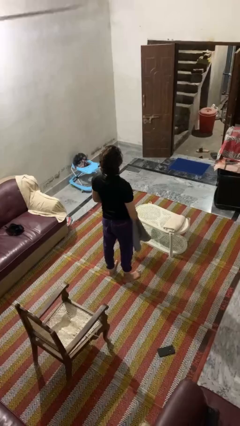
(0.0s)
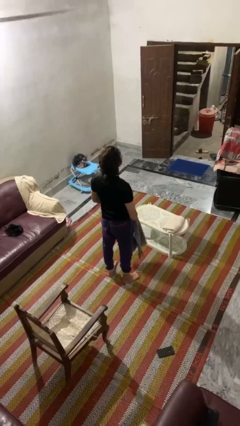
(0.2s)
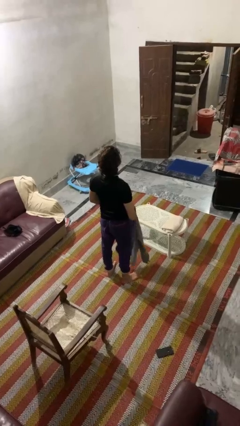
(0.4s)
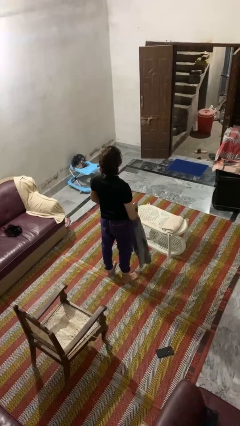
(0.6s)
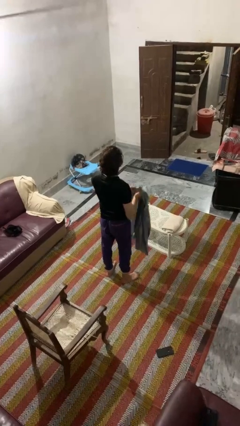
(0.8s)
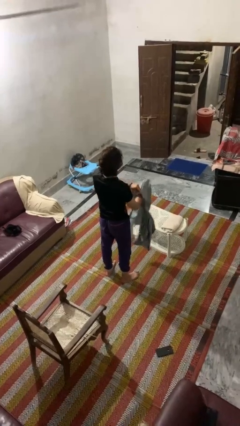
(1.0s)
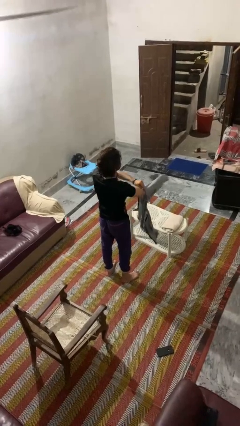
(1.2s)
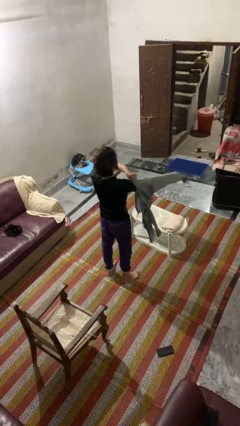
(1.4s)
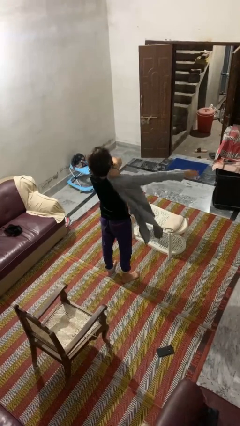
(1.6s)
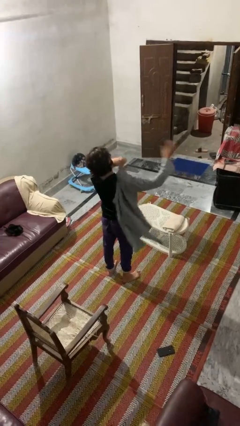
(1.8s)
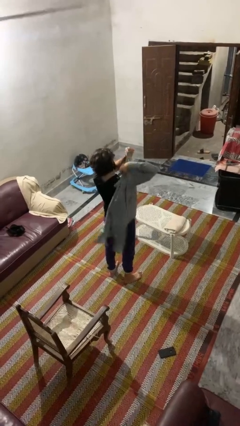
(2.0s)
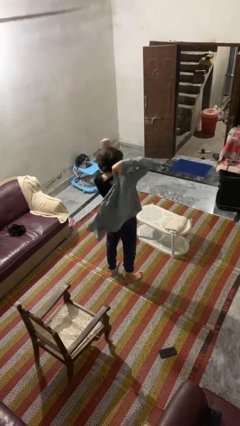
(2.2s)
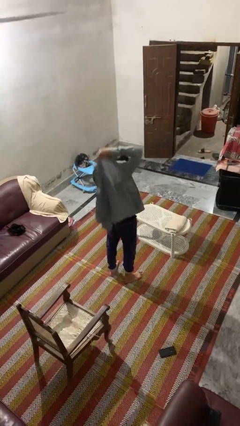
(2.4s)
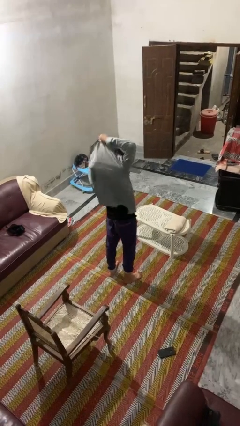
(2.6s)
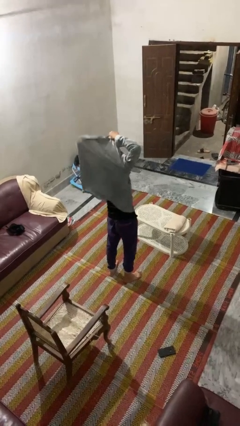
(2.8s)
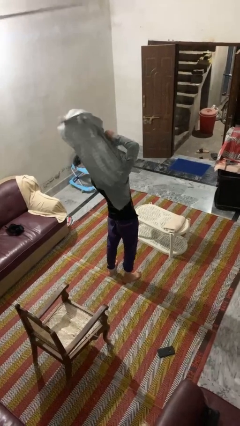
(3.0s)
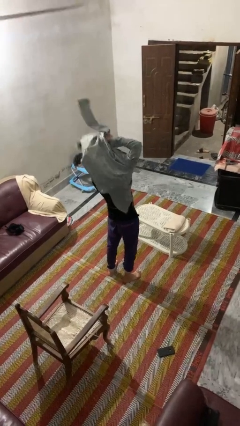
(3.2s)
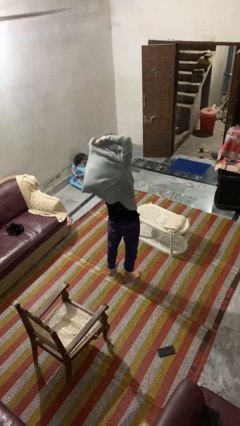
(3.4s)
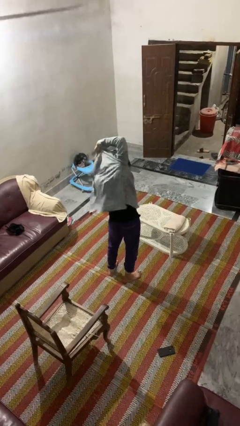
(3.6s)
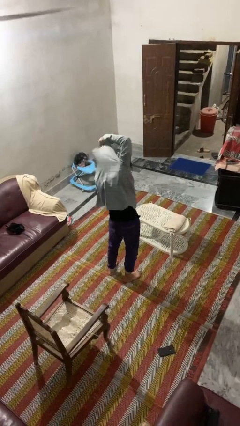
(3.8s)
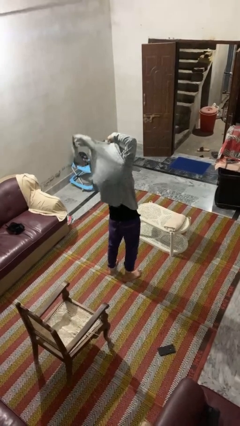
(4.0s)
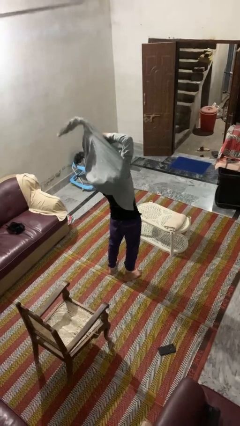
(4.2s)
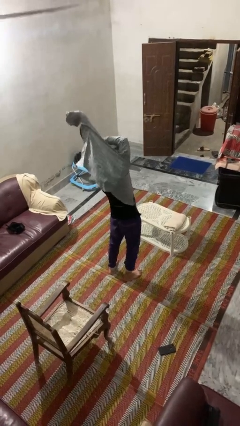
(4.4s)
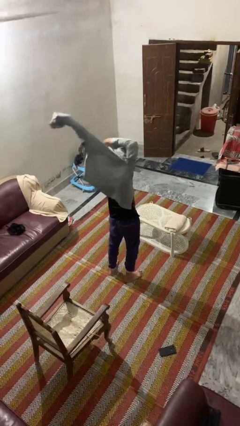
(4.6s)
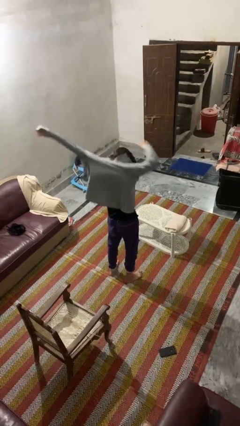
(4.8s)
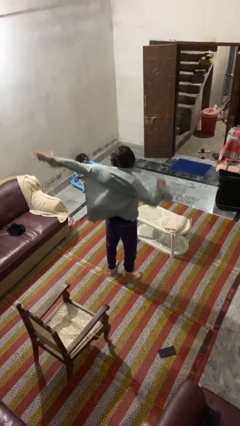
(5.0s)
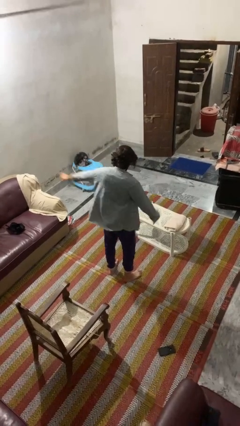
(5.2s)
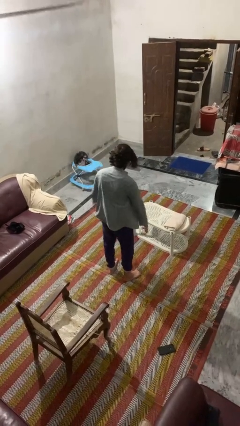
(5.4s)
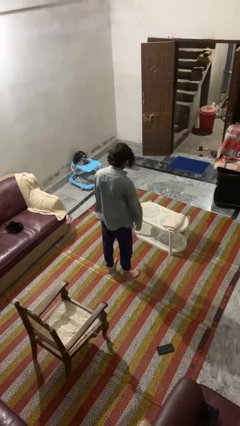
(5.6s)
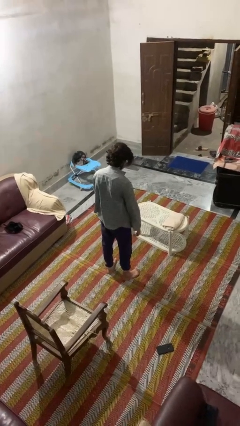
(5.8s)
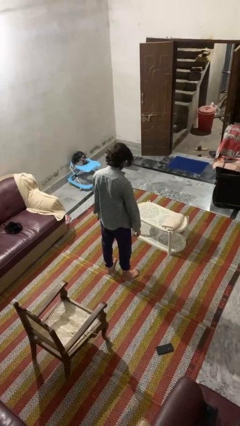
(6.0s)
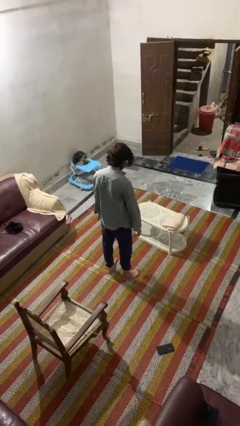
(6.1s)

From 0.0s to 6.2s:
person puts on shirt

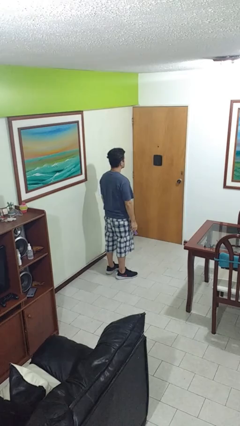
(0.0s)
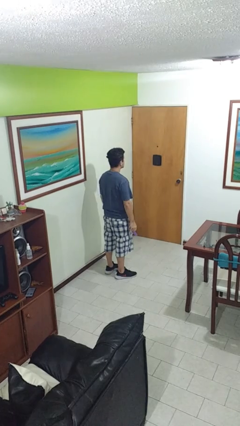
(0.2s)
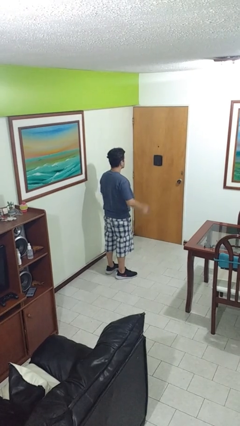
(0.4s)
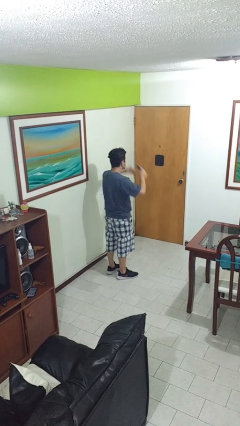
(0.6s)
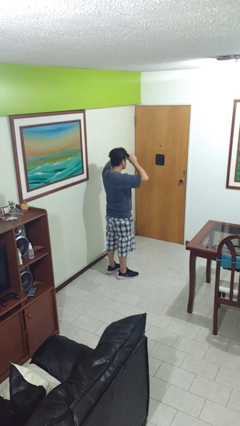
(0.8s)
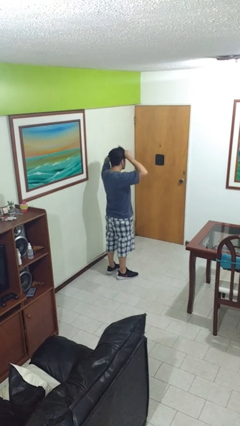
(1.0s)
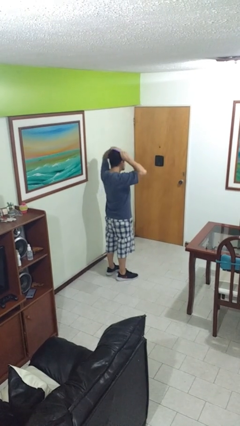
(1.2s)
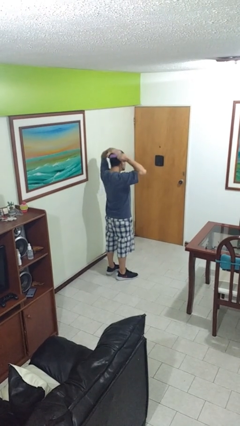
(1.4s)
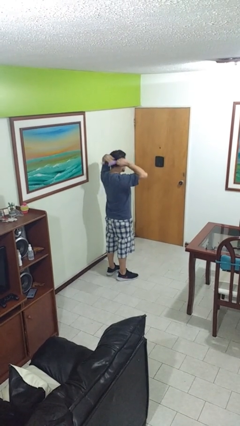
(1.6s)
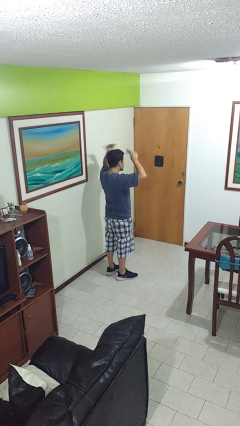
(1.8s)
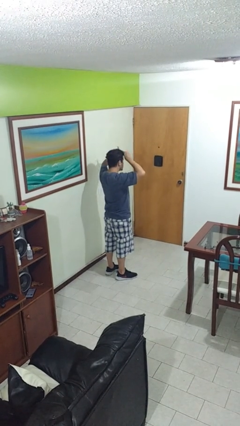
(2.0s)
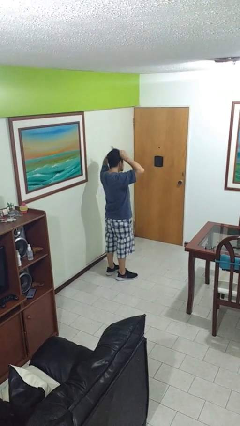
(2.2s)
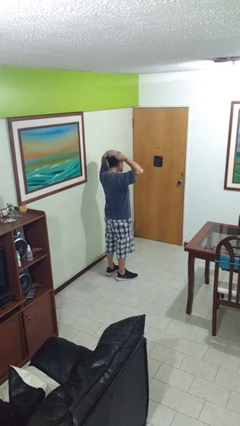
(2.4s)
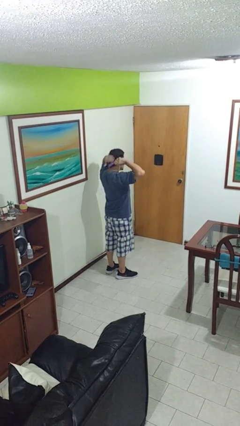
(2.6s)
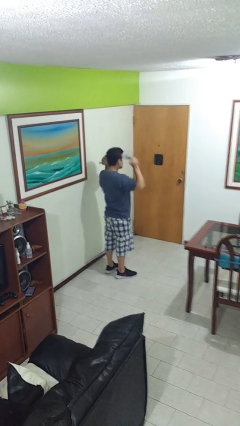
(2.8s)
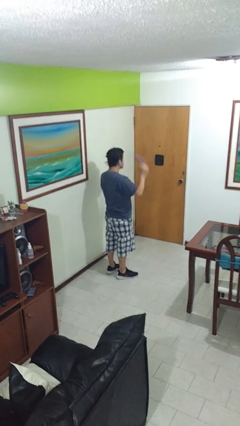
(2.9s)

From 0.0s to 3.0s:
person brushes hair

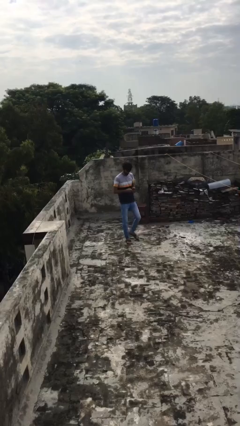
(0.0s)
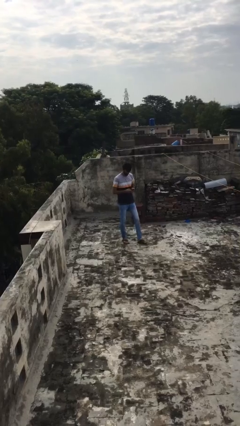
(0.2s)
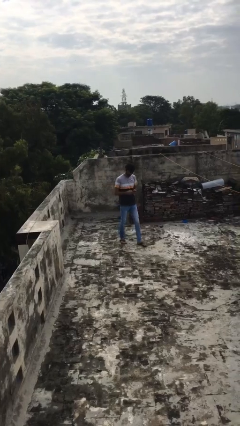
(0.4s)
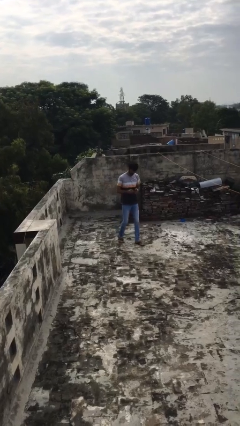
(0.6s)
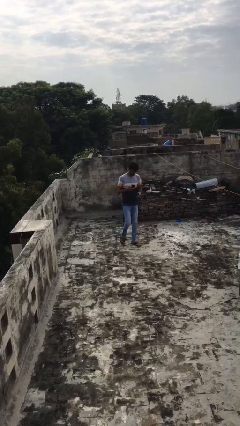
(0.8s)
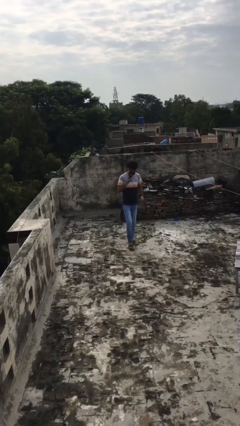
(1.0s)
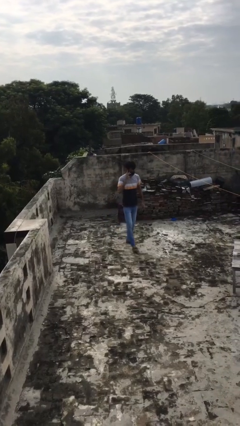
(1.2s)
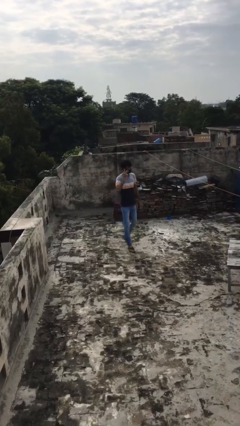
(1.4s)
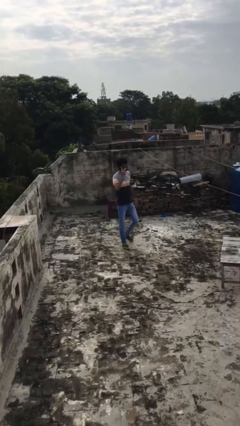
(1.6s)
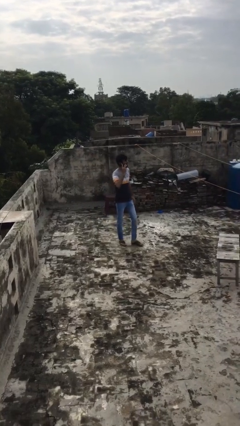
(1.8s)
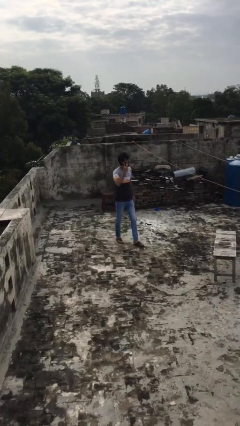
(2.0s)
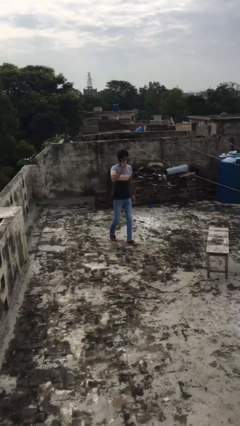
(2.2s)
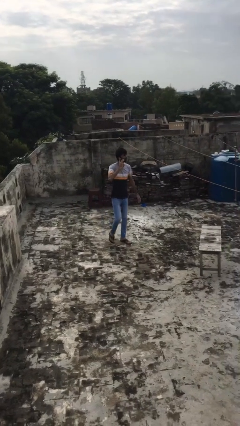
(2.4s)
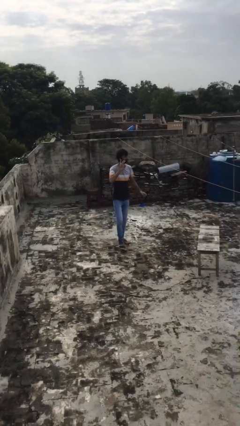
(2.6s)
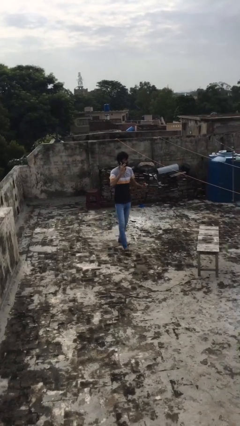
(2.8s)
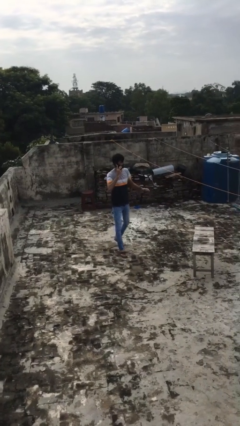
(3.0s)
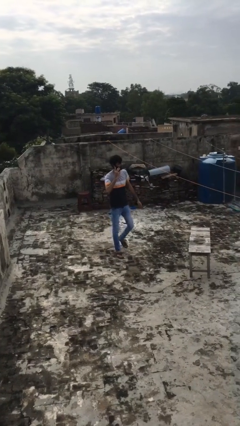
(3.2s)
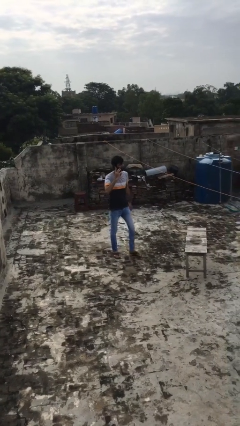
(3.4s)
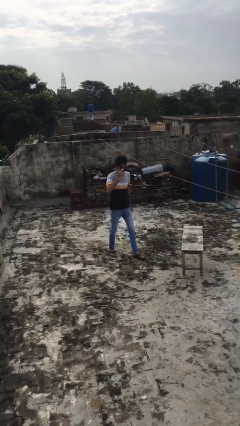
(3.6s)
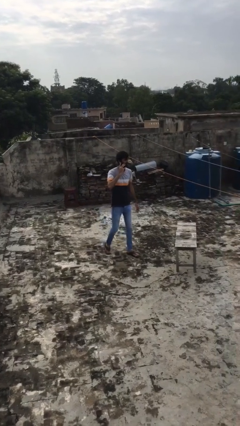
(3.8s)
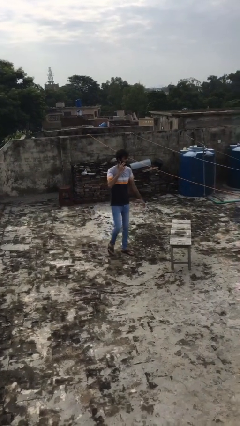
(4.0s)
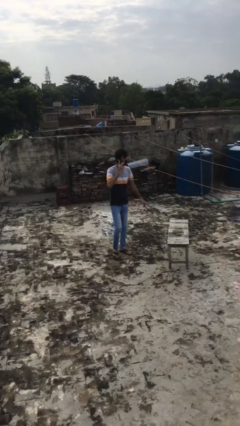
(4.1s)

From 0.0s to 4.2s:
person talks on phone

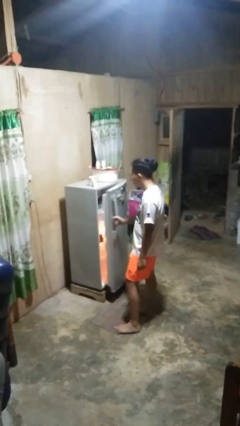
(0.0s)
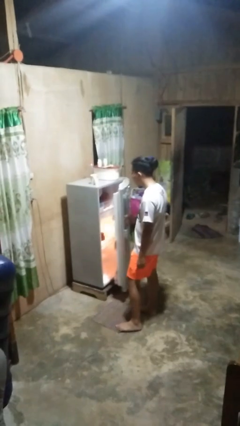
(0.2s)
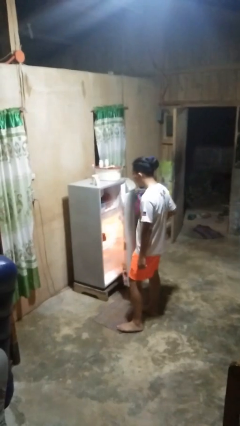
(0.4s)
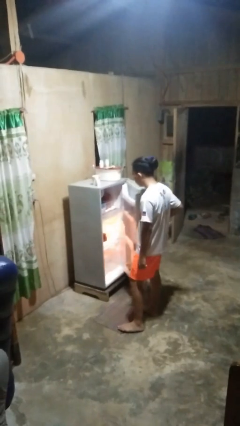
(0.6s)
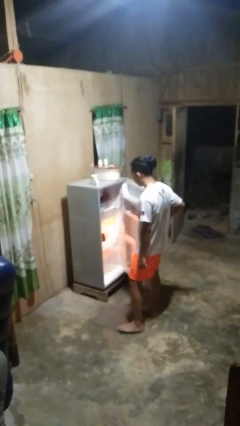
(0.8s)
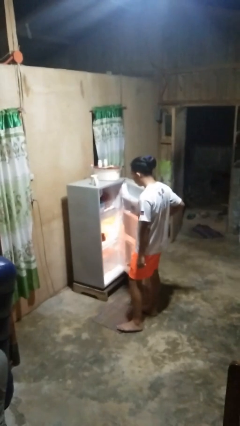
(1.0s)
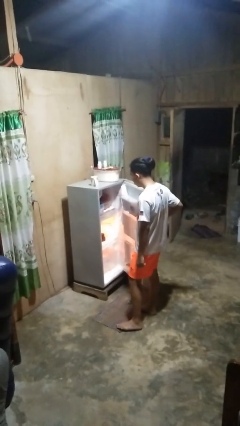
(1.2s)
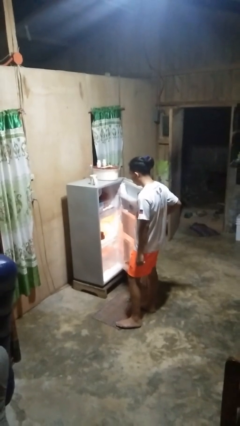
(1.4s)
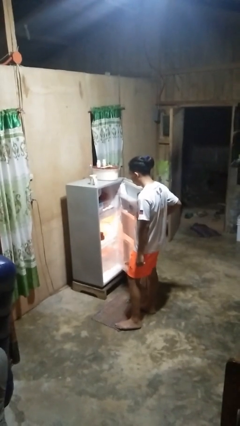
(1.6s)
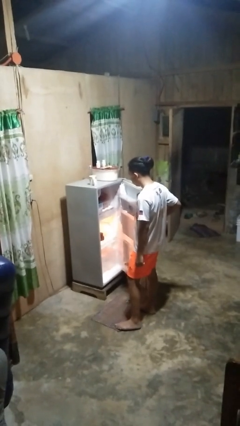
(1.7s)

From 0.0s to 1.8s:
person opens refrigerator

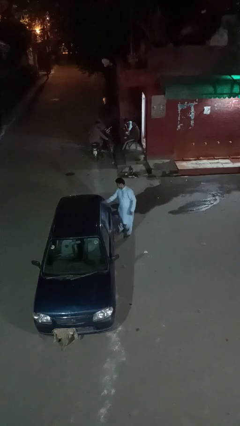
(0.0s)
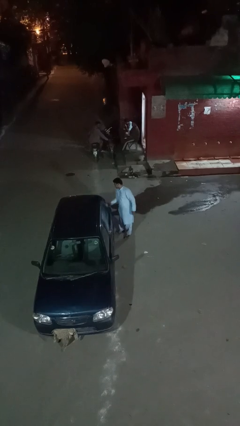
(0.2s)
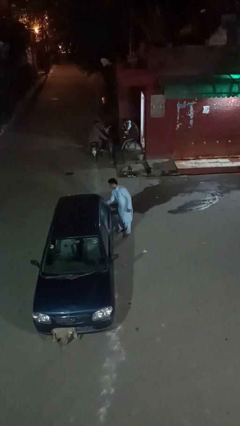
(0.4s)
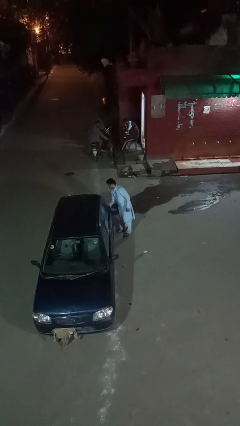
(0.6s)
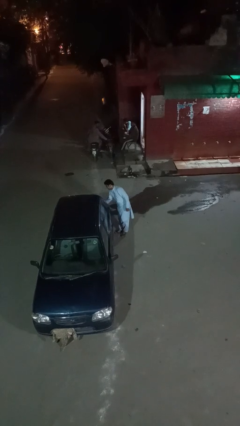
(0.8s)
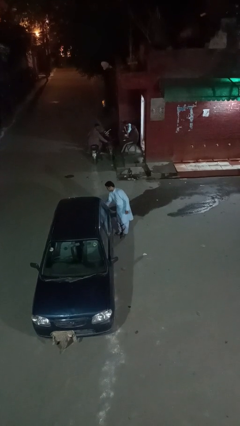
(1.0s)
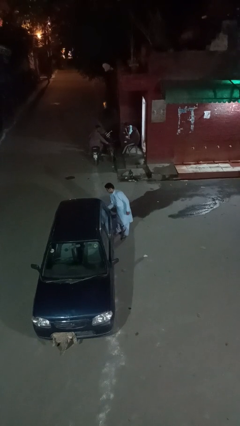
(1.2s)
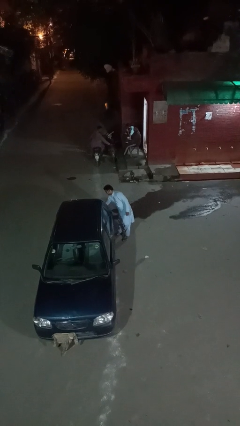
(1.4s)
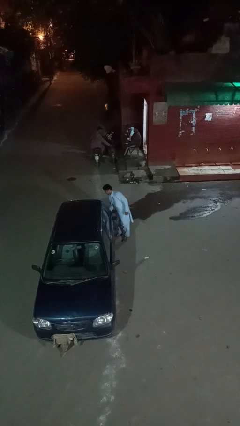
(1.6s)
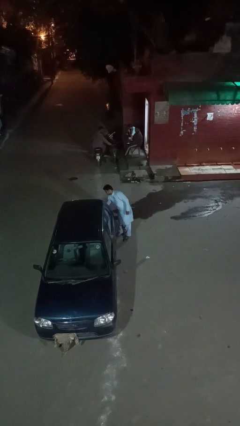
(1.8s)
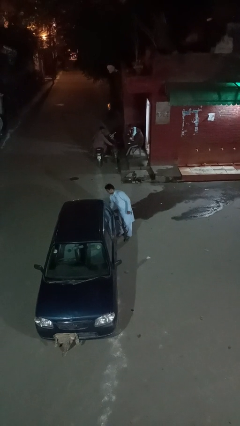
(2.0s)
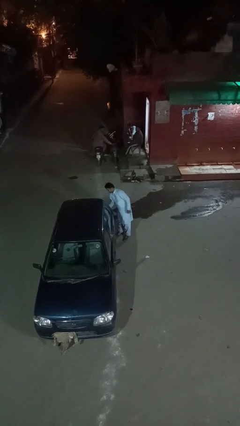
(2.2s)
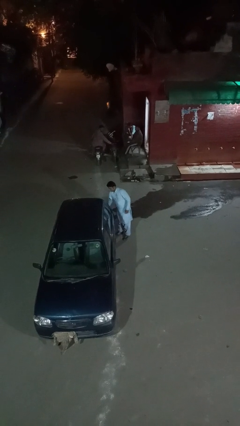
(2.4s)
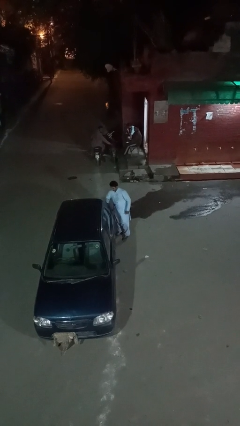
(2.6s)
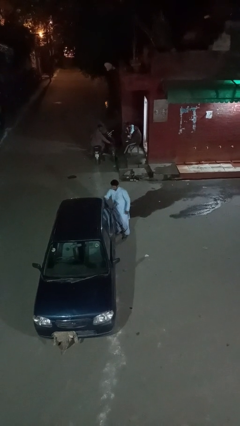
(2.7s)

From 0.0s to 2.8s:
person polishes car with rag
